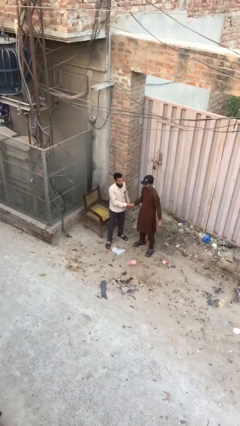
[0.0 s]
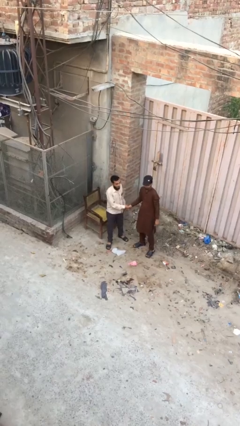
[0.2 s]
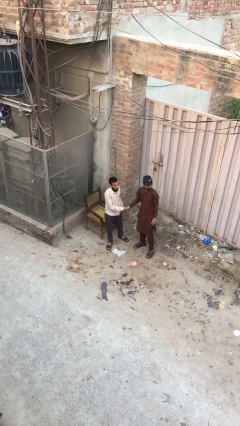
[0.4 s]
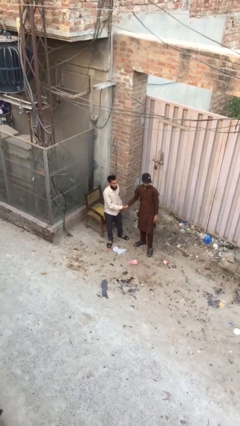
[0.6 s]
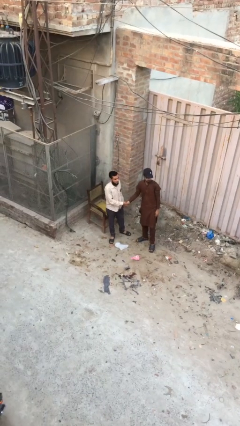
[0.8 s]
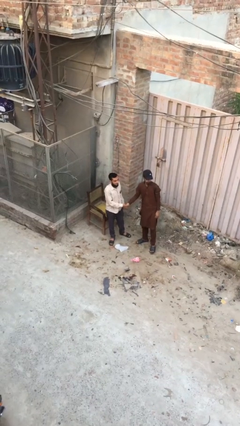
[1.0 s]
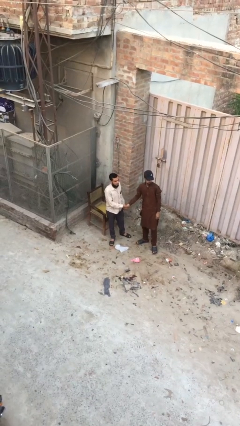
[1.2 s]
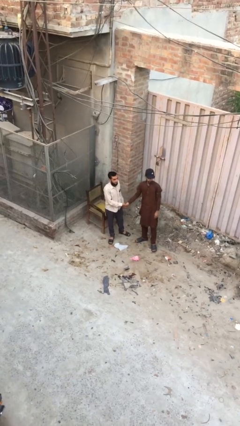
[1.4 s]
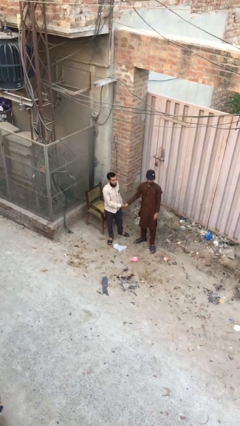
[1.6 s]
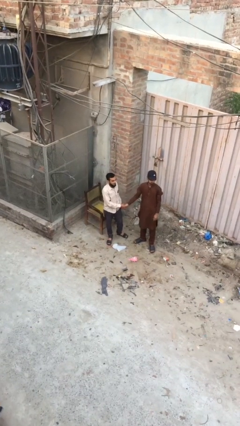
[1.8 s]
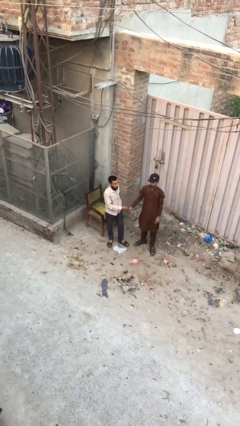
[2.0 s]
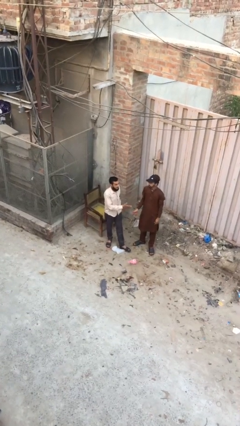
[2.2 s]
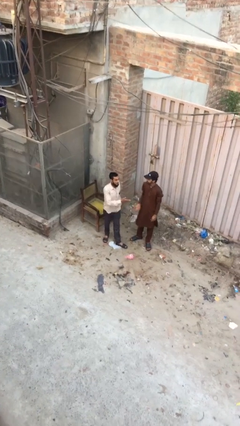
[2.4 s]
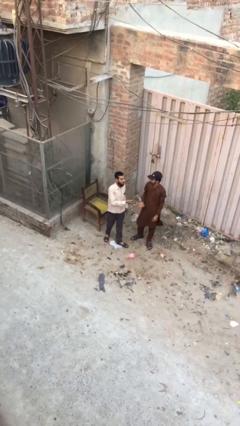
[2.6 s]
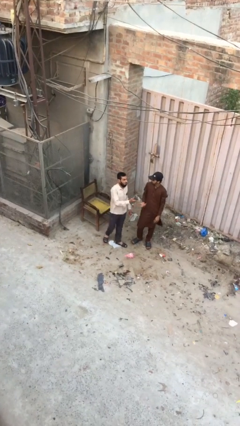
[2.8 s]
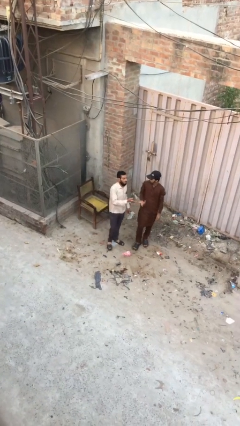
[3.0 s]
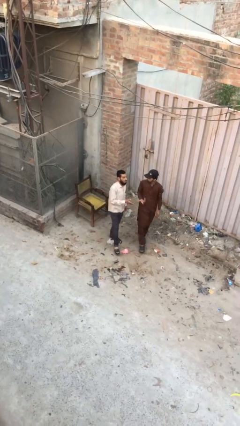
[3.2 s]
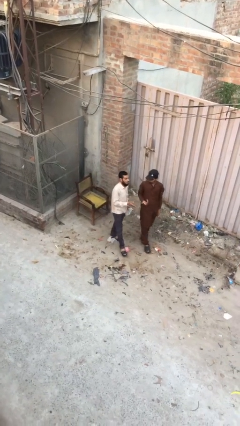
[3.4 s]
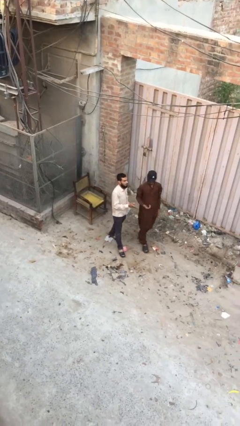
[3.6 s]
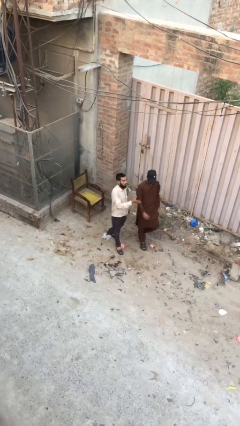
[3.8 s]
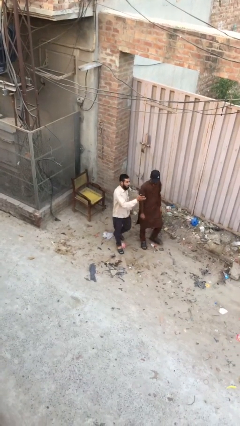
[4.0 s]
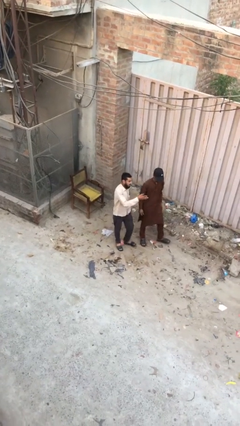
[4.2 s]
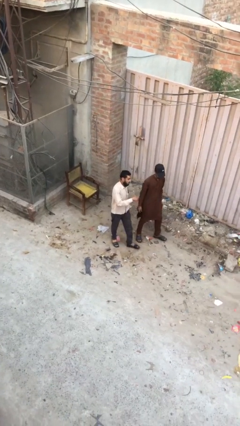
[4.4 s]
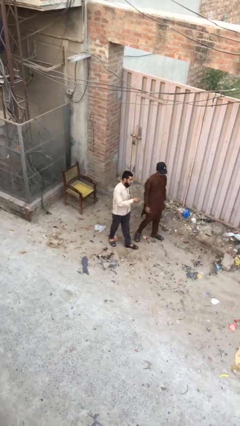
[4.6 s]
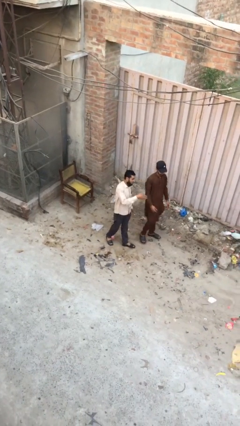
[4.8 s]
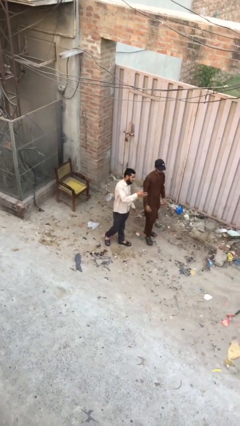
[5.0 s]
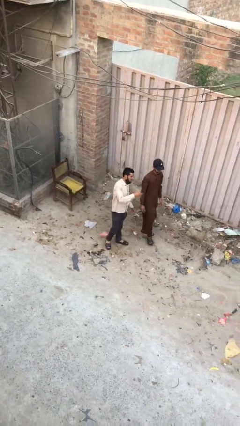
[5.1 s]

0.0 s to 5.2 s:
person talks to person

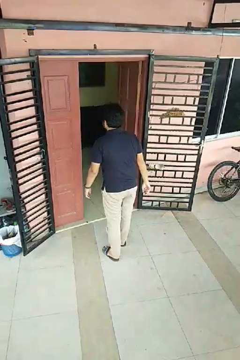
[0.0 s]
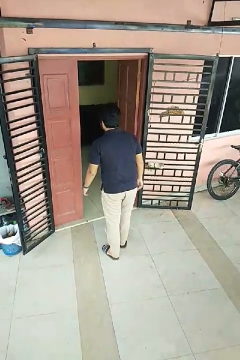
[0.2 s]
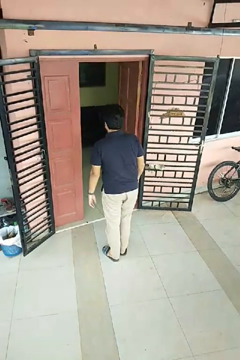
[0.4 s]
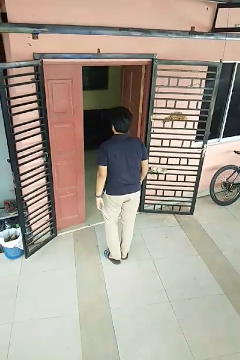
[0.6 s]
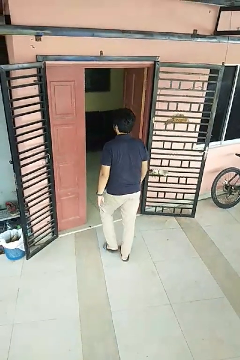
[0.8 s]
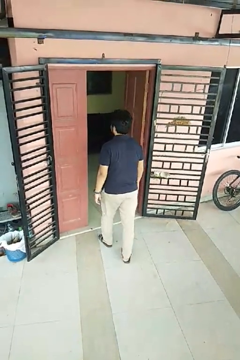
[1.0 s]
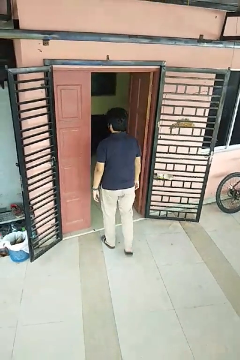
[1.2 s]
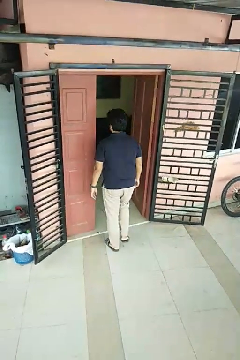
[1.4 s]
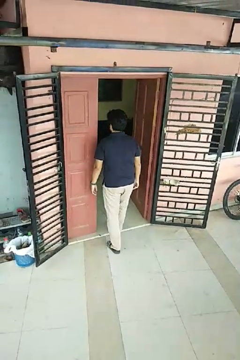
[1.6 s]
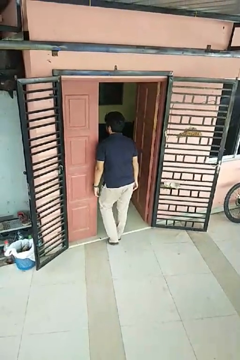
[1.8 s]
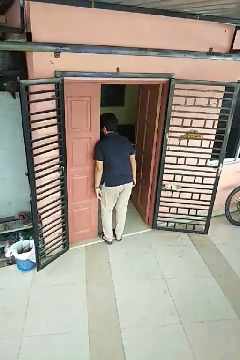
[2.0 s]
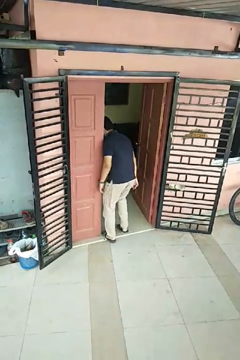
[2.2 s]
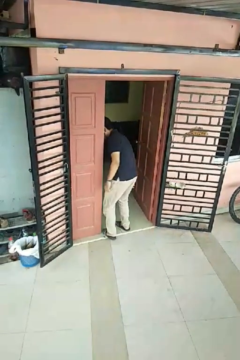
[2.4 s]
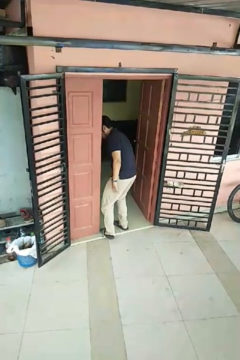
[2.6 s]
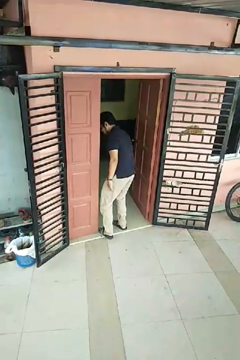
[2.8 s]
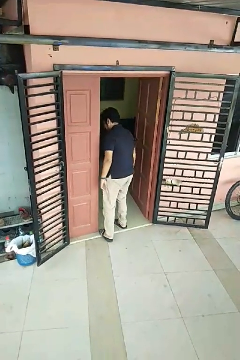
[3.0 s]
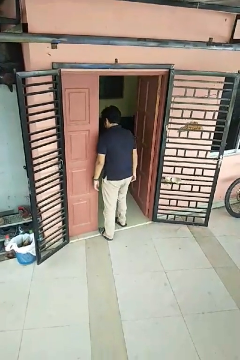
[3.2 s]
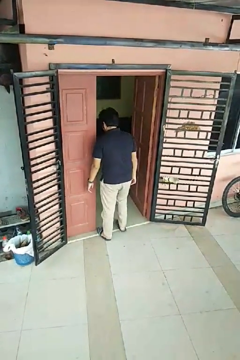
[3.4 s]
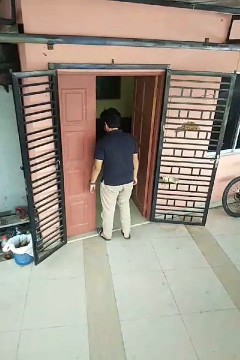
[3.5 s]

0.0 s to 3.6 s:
person bumps into wall

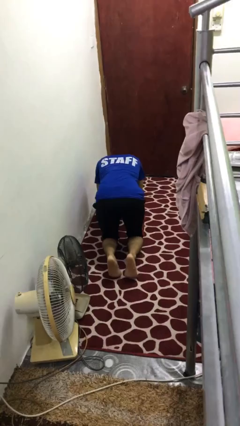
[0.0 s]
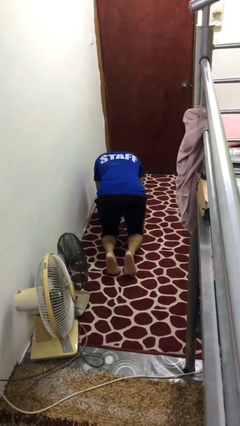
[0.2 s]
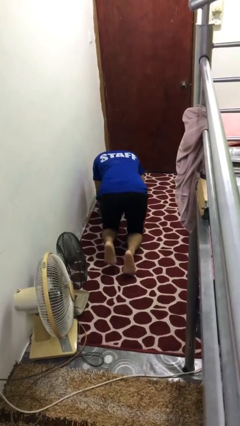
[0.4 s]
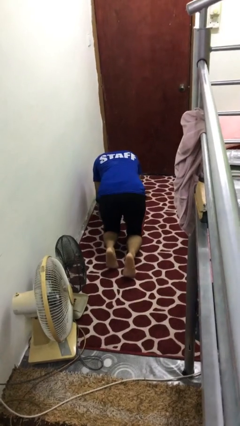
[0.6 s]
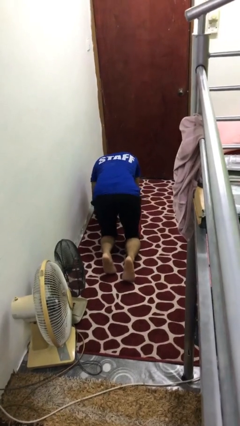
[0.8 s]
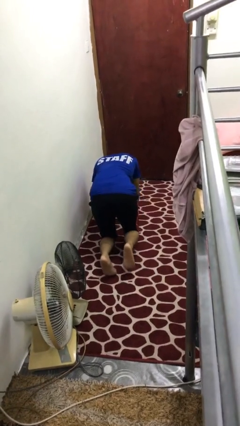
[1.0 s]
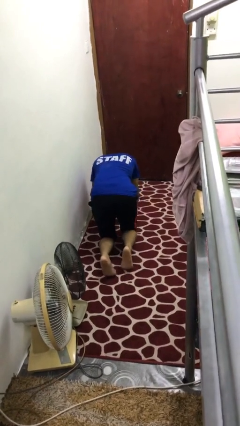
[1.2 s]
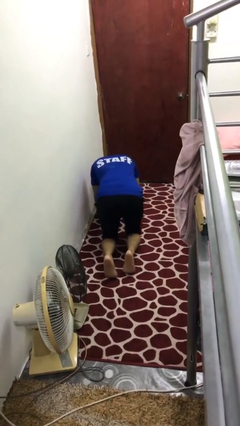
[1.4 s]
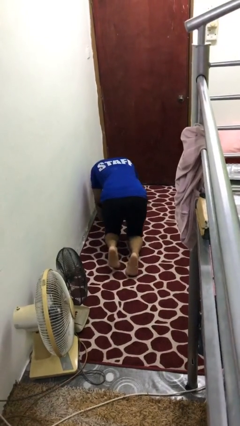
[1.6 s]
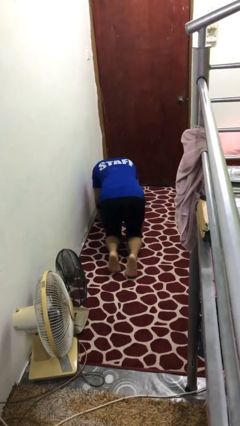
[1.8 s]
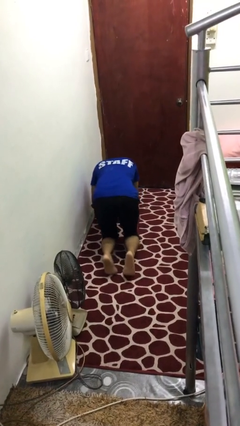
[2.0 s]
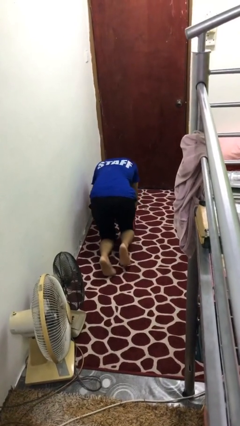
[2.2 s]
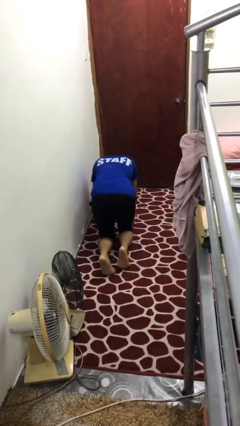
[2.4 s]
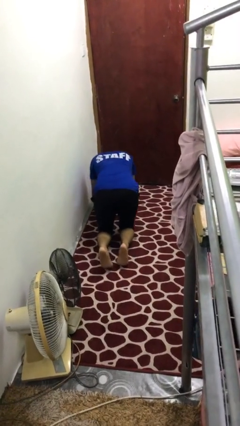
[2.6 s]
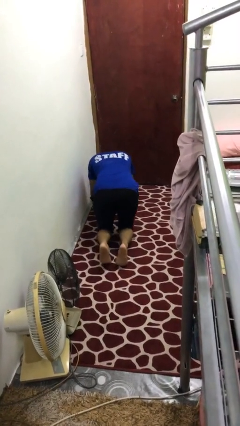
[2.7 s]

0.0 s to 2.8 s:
person crawls

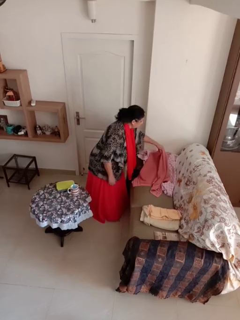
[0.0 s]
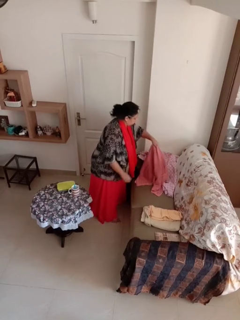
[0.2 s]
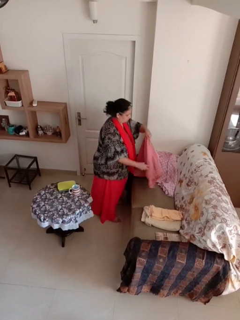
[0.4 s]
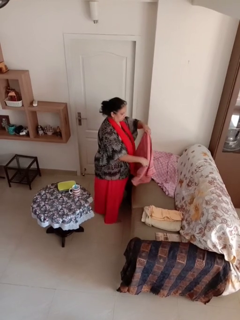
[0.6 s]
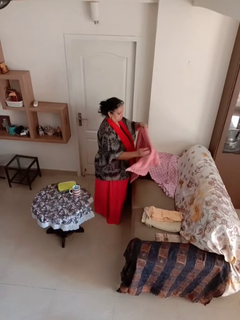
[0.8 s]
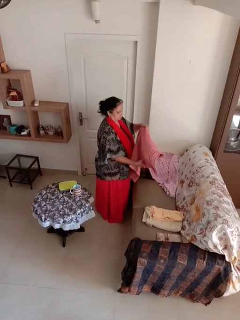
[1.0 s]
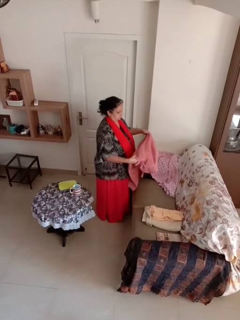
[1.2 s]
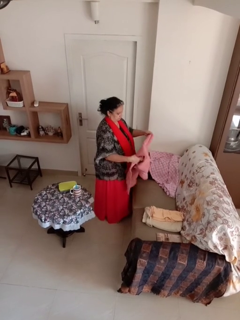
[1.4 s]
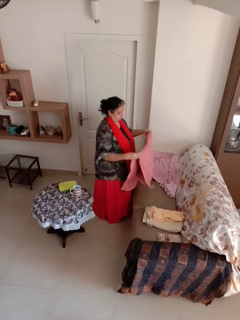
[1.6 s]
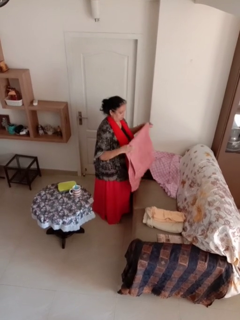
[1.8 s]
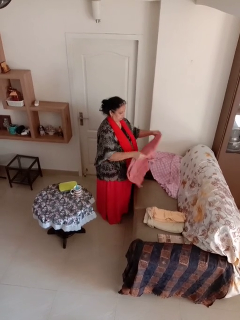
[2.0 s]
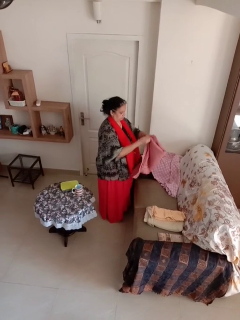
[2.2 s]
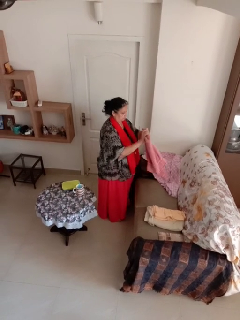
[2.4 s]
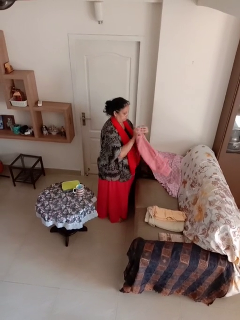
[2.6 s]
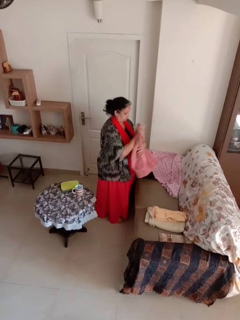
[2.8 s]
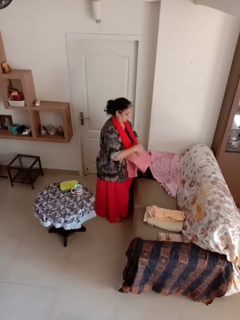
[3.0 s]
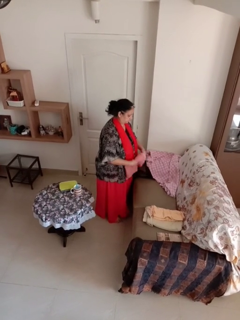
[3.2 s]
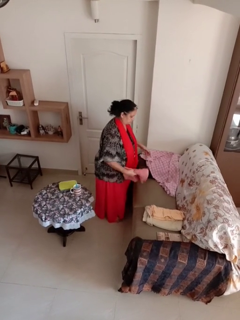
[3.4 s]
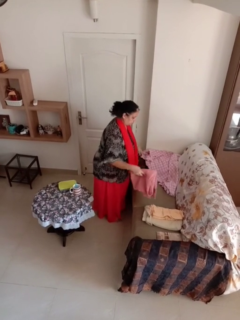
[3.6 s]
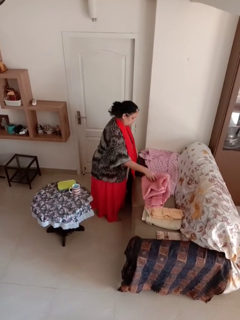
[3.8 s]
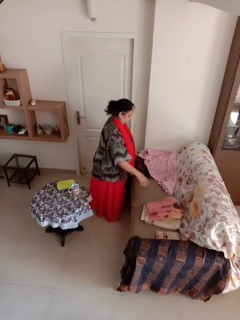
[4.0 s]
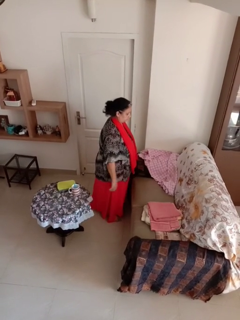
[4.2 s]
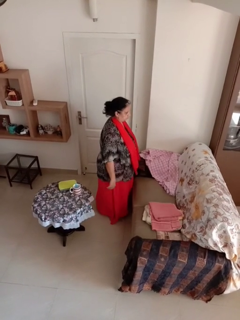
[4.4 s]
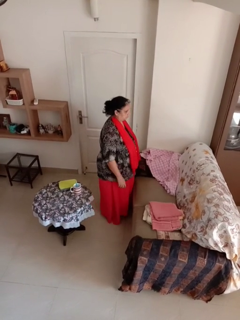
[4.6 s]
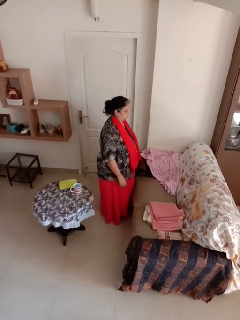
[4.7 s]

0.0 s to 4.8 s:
person folds towel

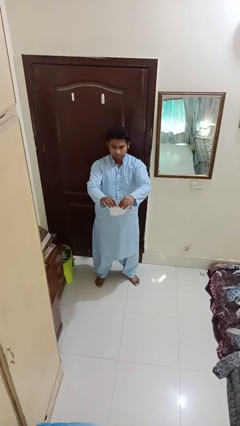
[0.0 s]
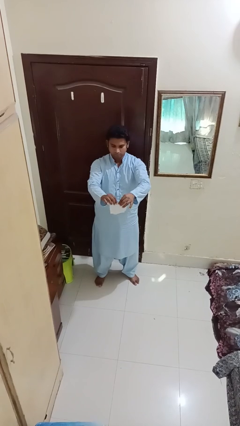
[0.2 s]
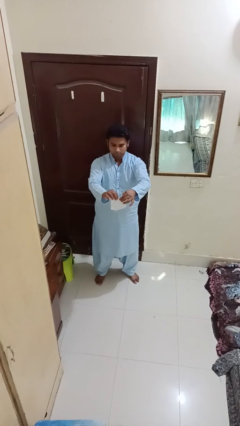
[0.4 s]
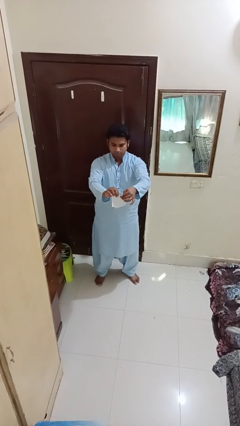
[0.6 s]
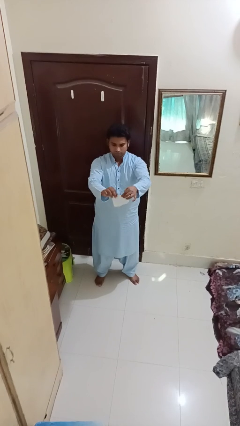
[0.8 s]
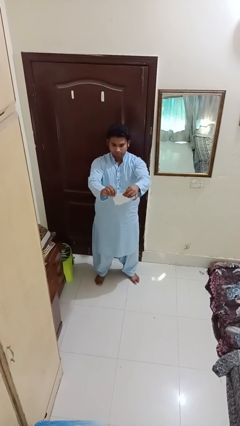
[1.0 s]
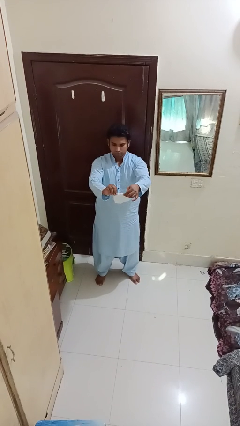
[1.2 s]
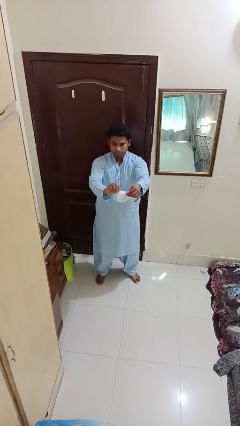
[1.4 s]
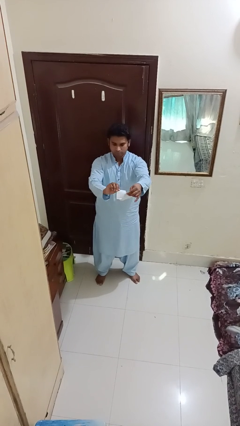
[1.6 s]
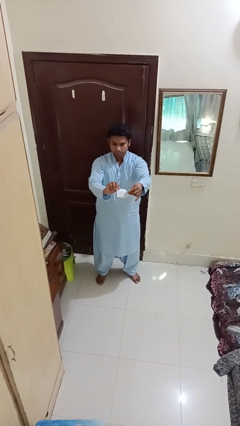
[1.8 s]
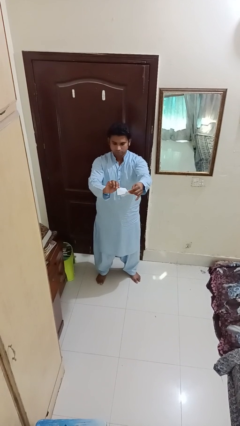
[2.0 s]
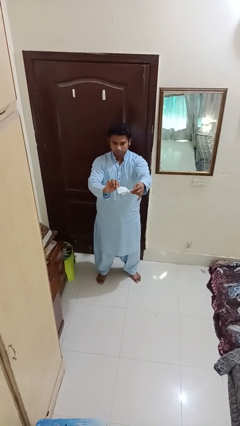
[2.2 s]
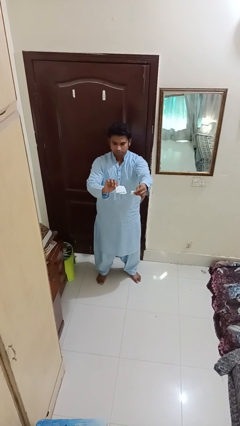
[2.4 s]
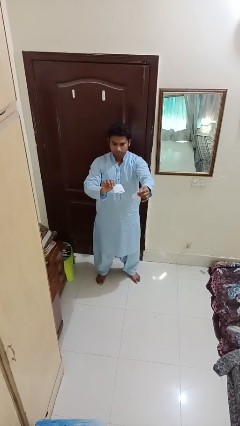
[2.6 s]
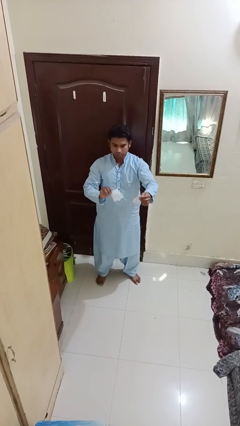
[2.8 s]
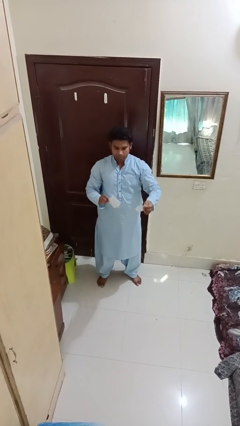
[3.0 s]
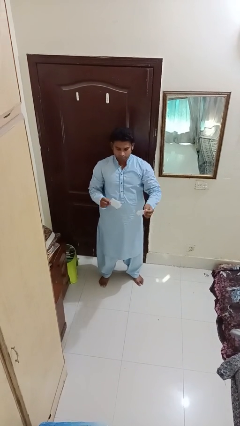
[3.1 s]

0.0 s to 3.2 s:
person tears paper
